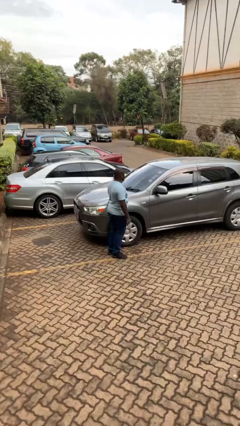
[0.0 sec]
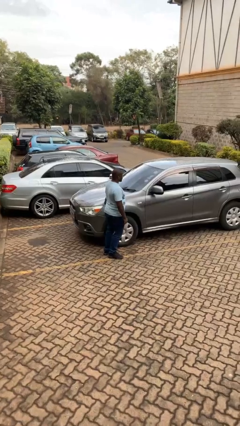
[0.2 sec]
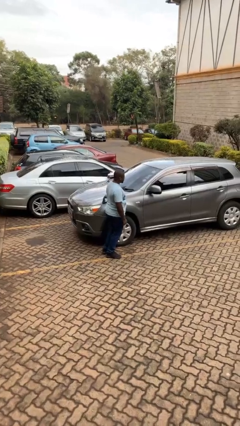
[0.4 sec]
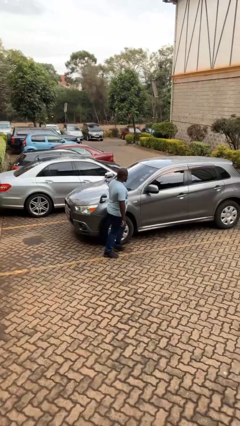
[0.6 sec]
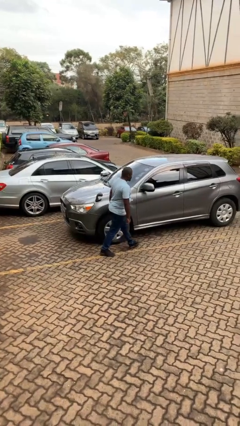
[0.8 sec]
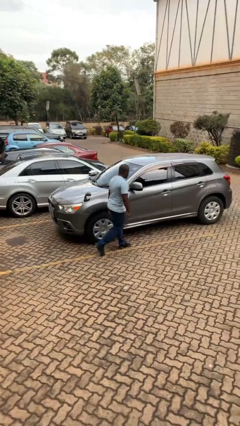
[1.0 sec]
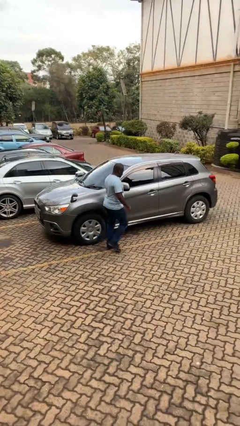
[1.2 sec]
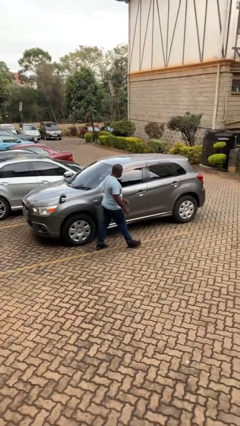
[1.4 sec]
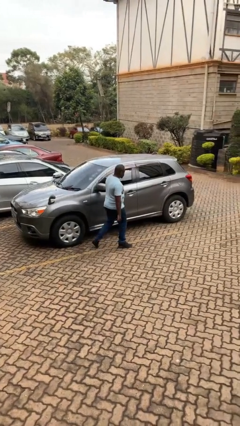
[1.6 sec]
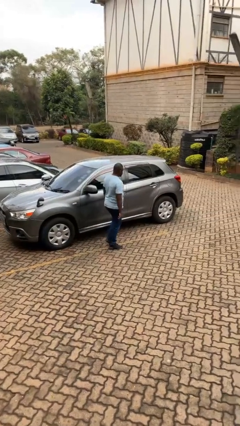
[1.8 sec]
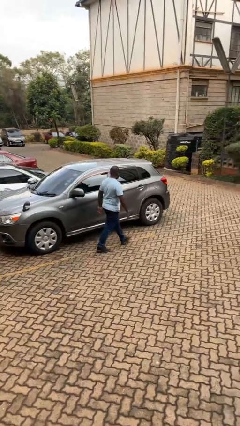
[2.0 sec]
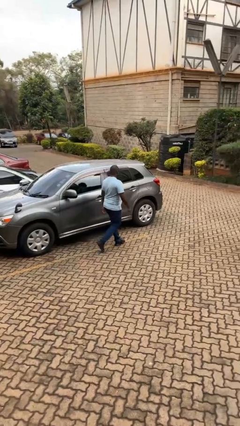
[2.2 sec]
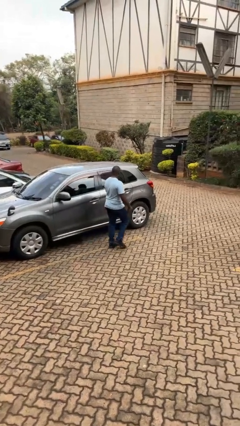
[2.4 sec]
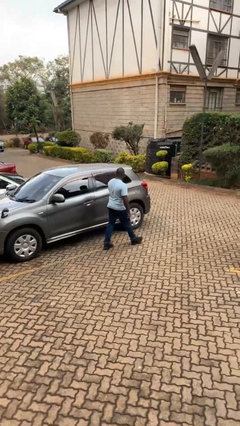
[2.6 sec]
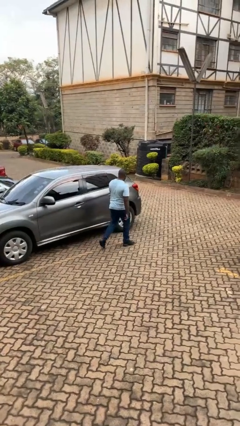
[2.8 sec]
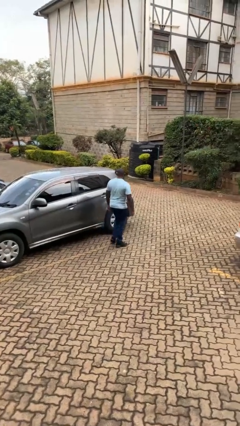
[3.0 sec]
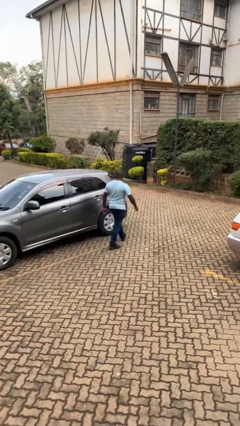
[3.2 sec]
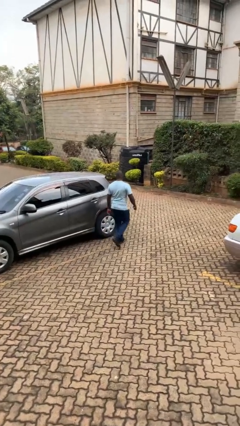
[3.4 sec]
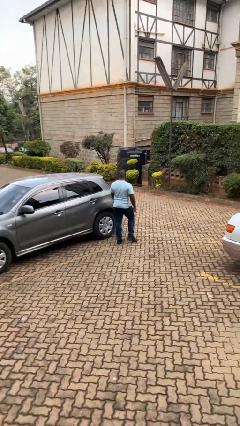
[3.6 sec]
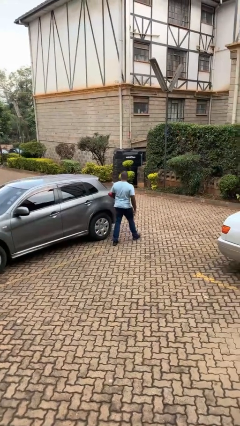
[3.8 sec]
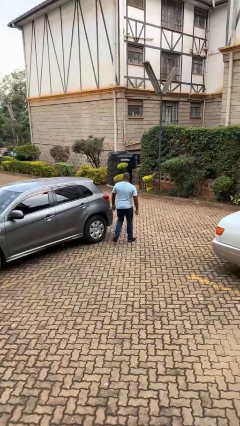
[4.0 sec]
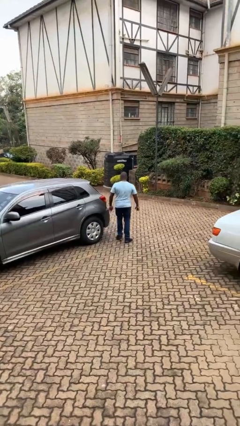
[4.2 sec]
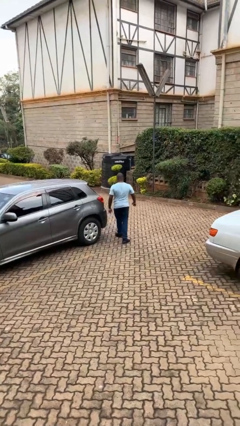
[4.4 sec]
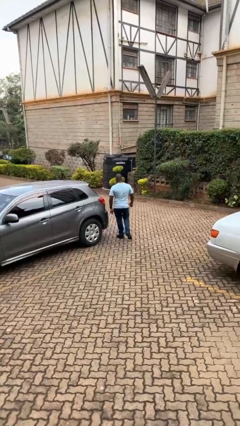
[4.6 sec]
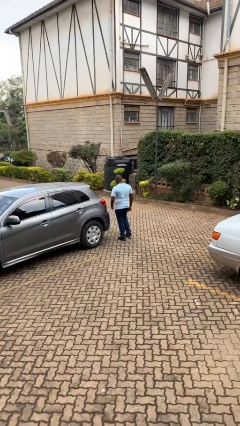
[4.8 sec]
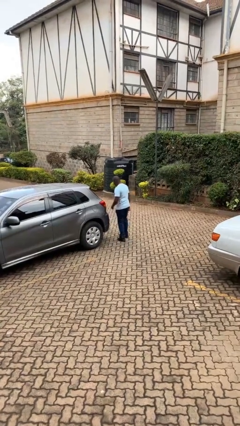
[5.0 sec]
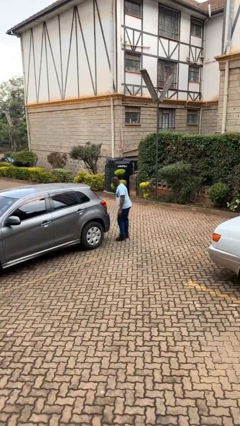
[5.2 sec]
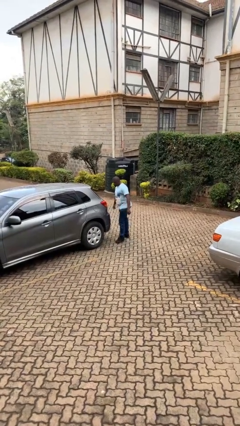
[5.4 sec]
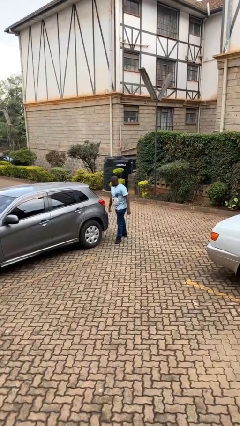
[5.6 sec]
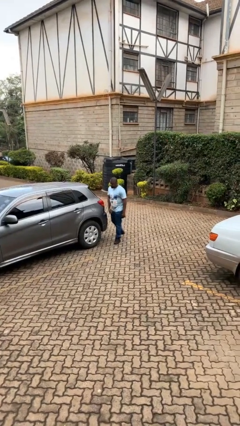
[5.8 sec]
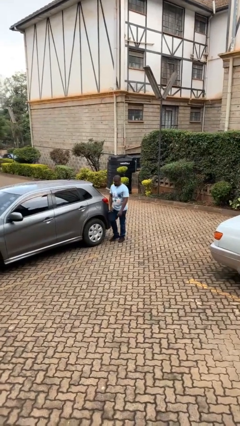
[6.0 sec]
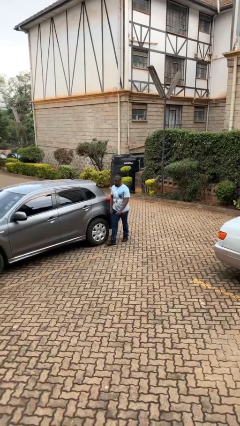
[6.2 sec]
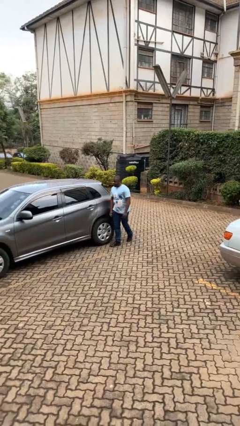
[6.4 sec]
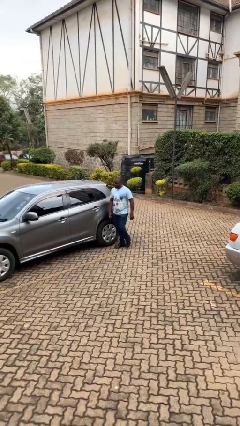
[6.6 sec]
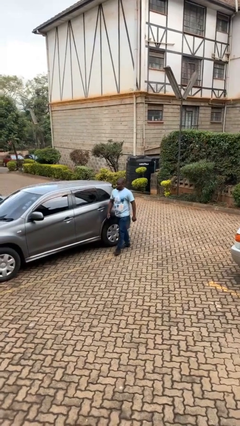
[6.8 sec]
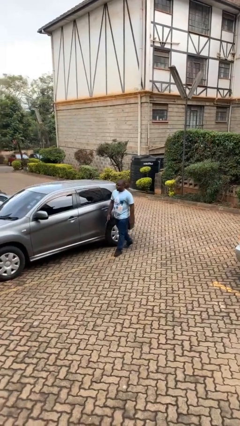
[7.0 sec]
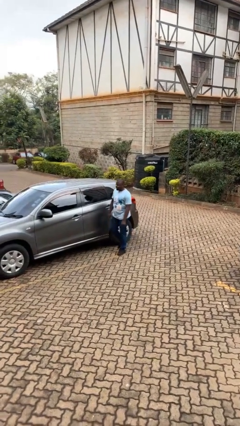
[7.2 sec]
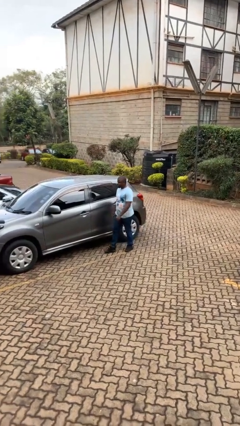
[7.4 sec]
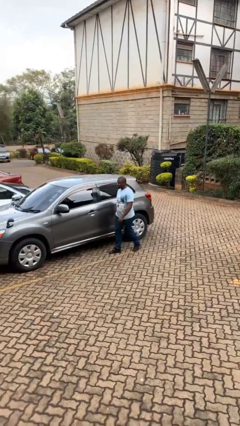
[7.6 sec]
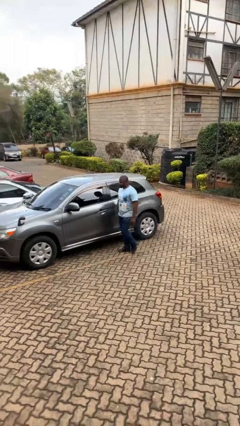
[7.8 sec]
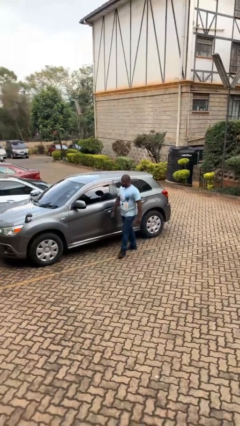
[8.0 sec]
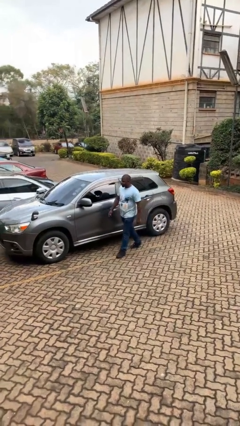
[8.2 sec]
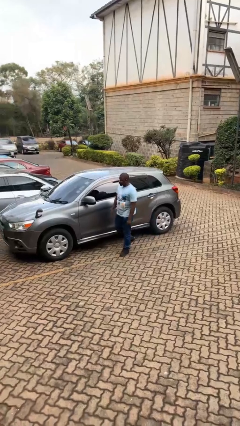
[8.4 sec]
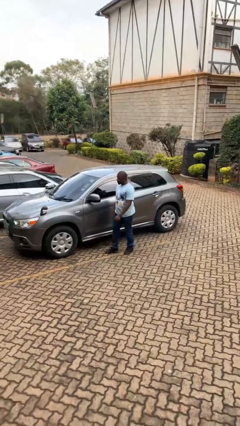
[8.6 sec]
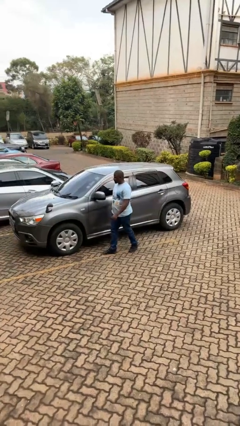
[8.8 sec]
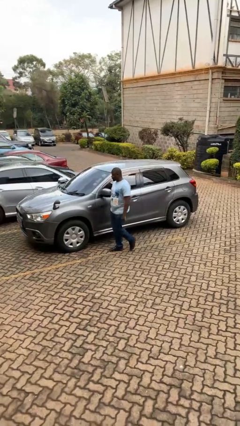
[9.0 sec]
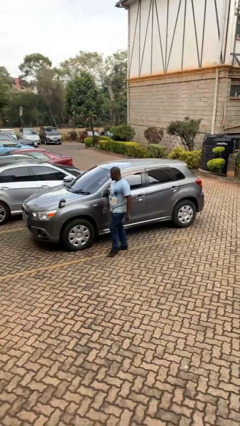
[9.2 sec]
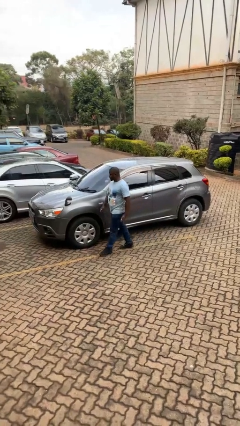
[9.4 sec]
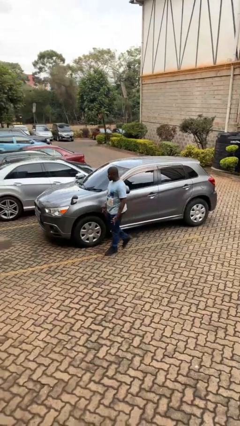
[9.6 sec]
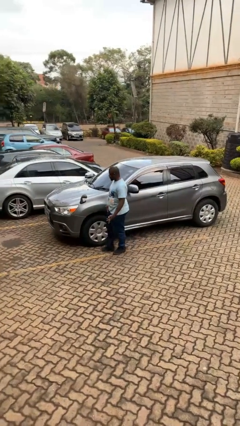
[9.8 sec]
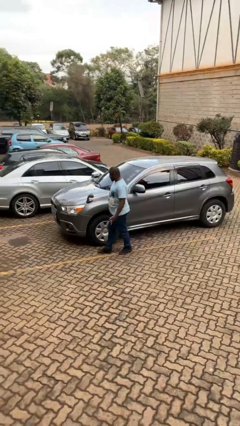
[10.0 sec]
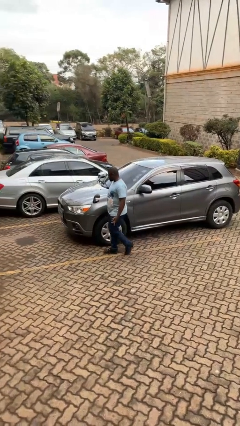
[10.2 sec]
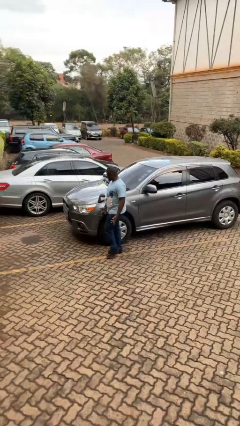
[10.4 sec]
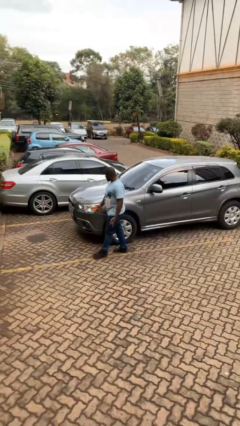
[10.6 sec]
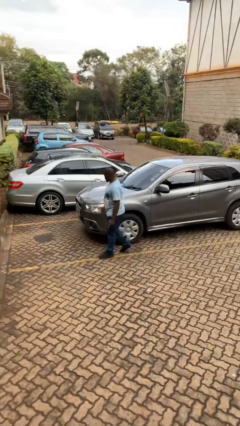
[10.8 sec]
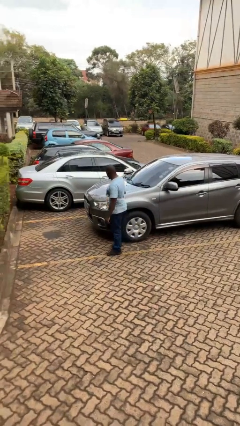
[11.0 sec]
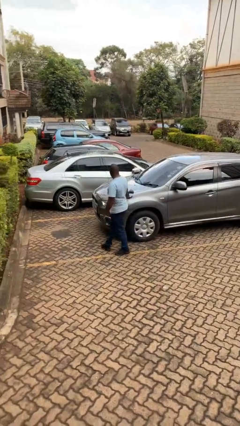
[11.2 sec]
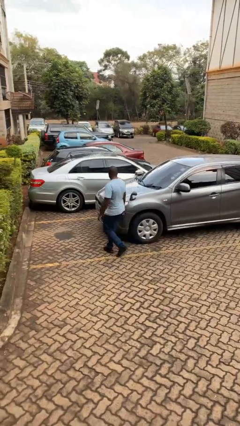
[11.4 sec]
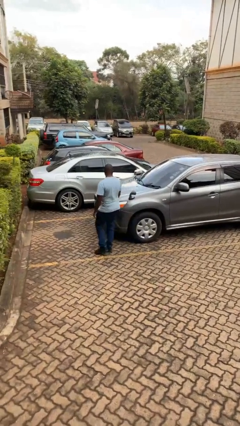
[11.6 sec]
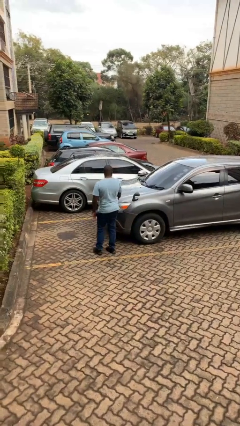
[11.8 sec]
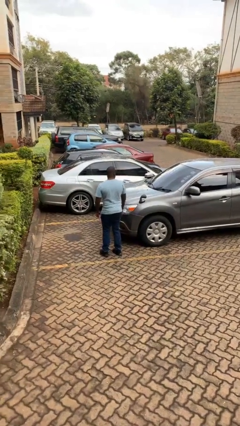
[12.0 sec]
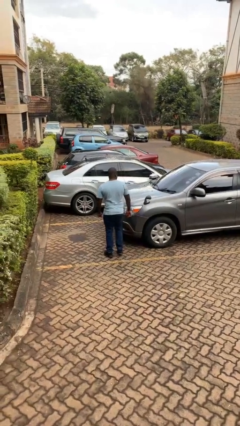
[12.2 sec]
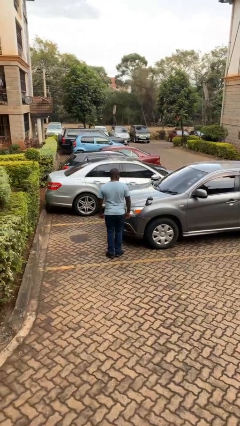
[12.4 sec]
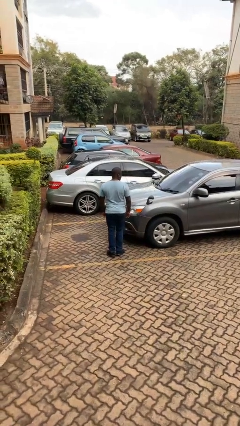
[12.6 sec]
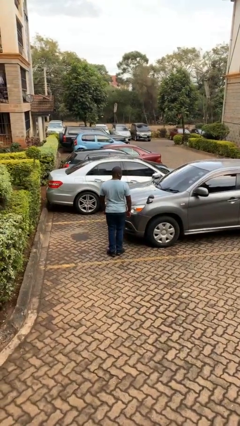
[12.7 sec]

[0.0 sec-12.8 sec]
person walks around car

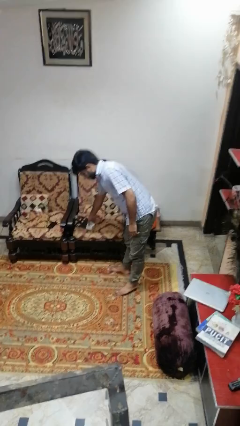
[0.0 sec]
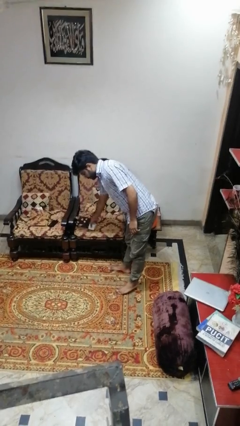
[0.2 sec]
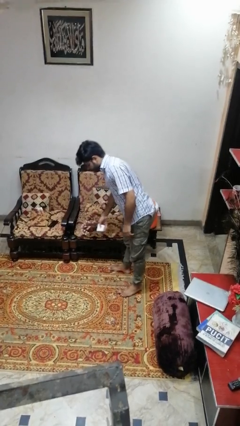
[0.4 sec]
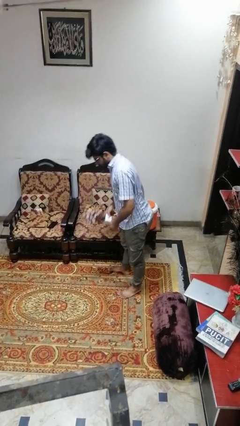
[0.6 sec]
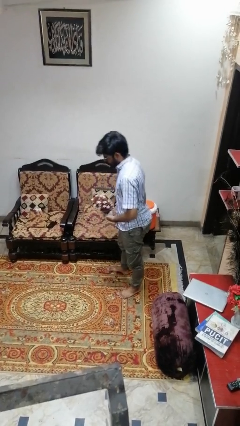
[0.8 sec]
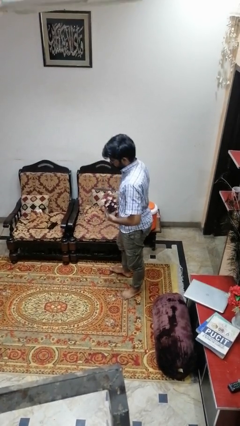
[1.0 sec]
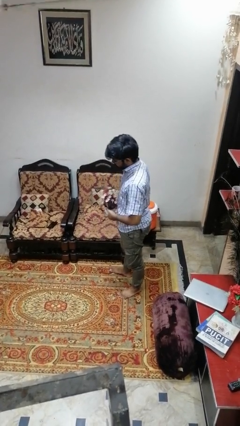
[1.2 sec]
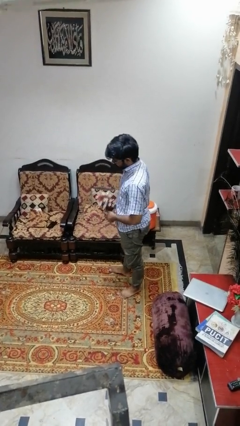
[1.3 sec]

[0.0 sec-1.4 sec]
person picks up object from couch

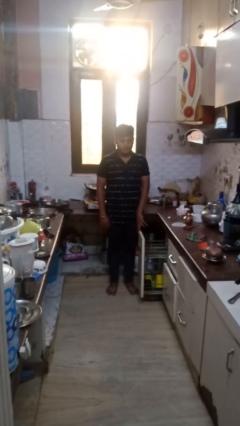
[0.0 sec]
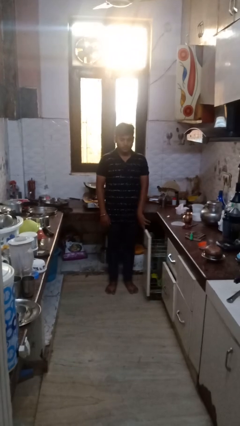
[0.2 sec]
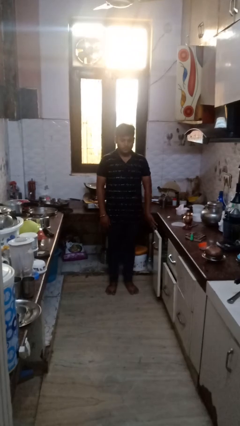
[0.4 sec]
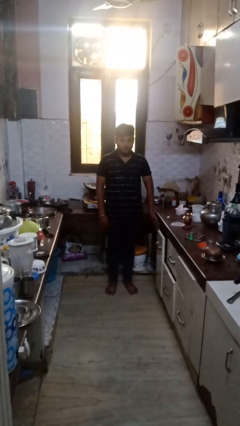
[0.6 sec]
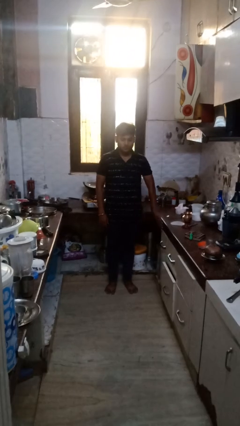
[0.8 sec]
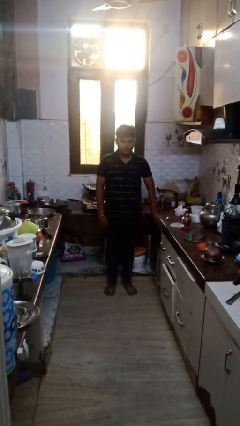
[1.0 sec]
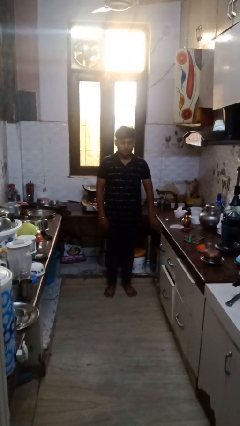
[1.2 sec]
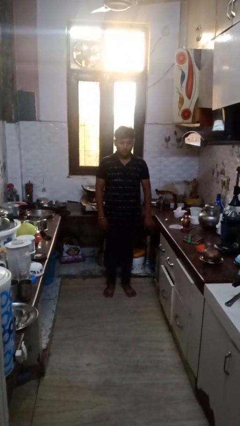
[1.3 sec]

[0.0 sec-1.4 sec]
person closes dishwasher

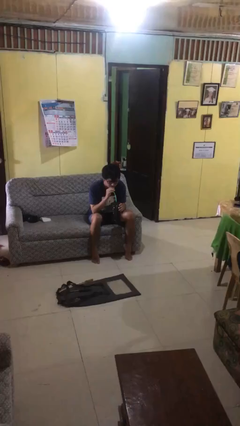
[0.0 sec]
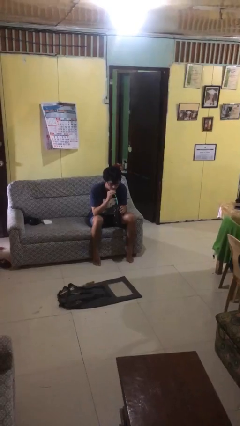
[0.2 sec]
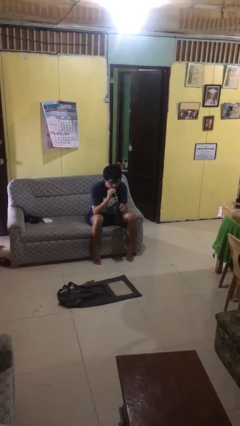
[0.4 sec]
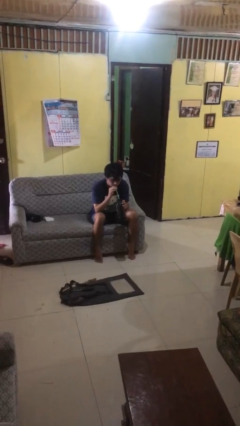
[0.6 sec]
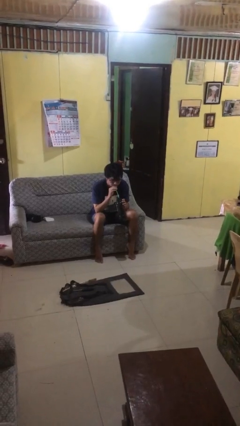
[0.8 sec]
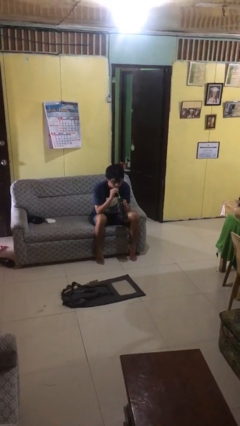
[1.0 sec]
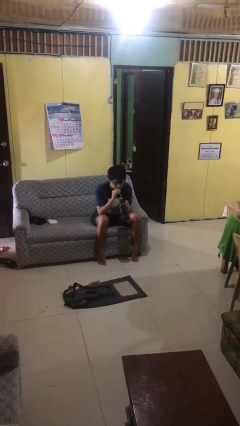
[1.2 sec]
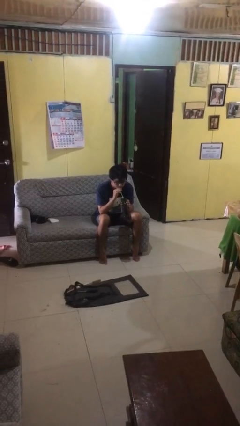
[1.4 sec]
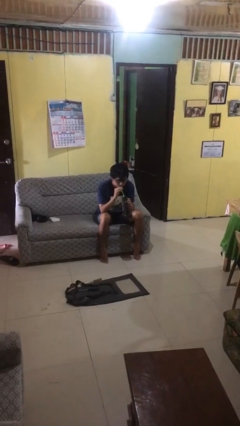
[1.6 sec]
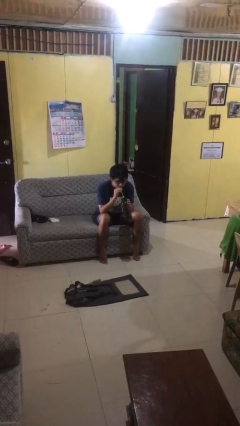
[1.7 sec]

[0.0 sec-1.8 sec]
person drinks from straw

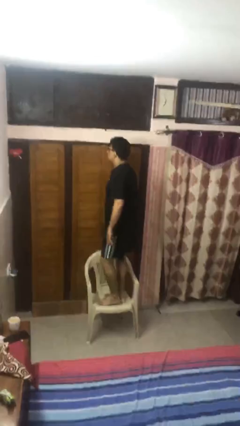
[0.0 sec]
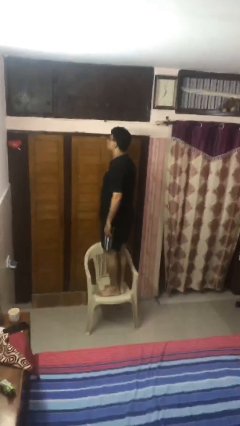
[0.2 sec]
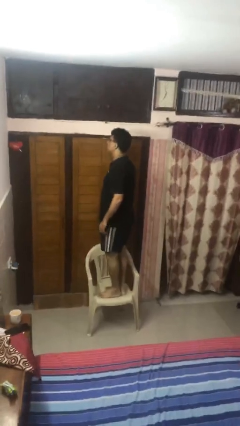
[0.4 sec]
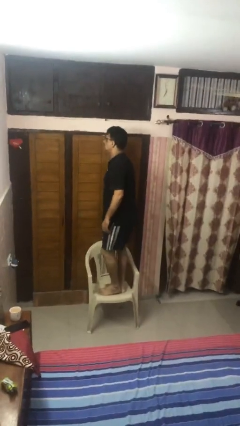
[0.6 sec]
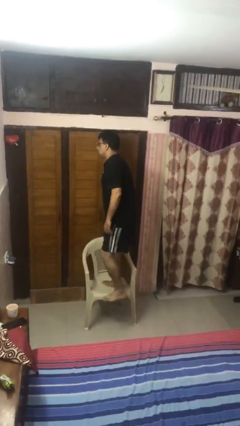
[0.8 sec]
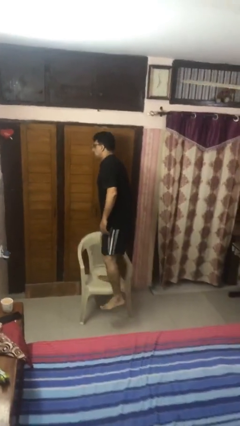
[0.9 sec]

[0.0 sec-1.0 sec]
person climbs off chair
